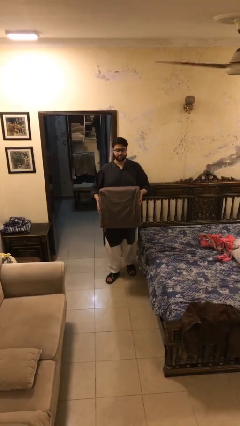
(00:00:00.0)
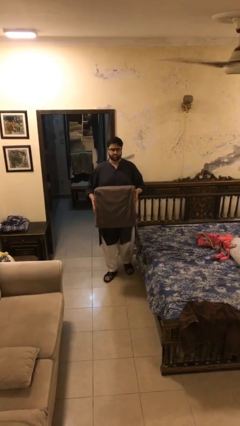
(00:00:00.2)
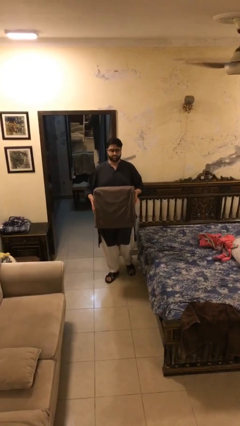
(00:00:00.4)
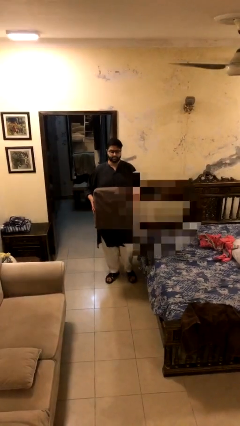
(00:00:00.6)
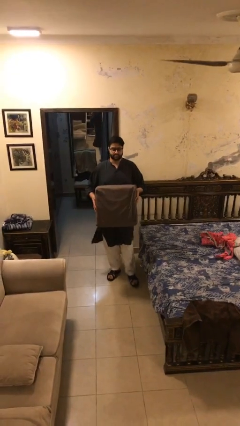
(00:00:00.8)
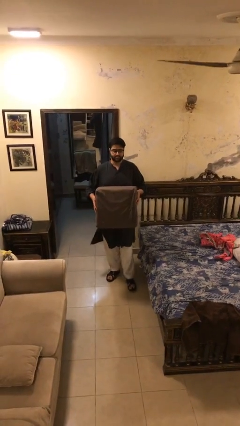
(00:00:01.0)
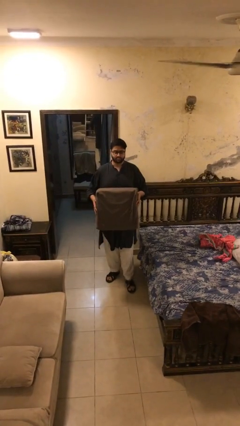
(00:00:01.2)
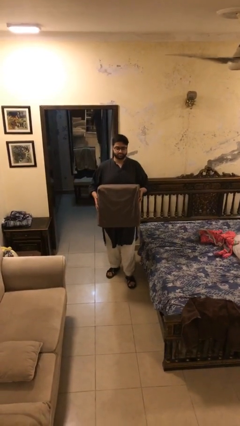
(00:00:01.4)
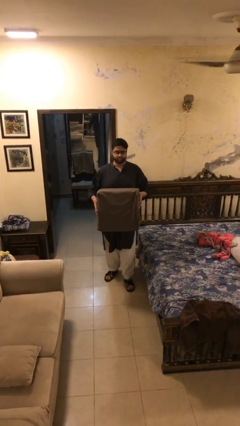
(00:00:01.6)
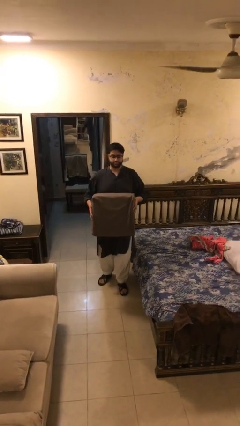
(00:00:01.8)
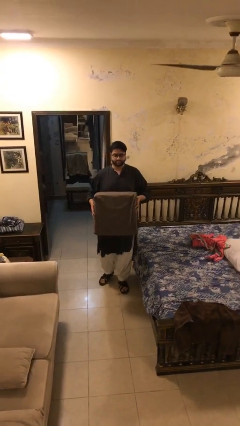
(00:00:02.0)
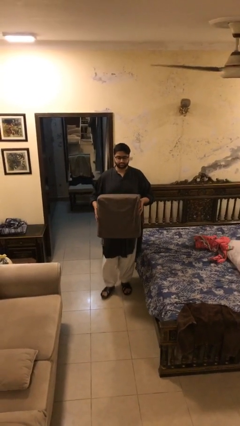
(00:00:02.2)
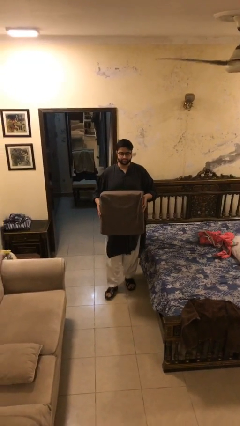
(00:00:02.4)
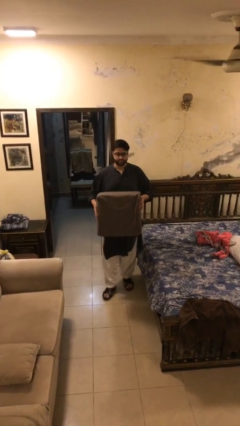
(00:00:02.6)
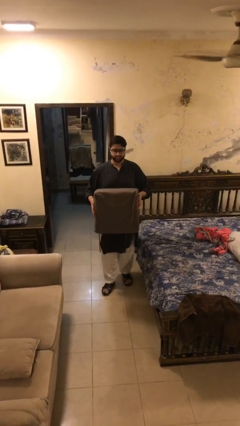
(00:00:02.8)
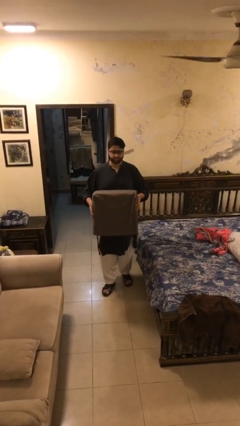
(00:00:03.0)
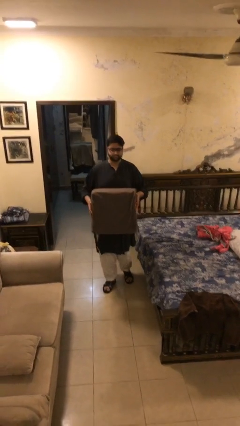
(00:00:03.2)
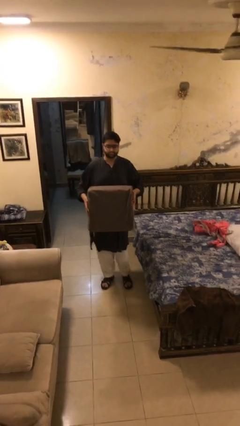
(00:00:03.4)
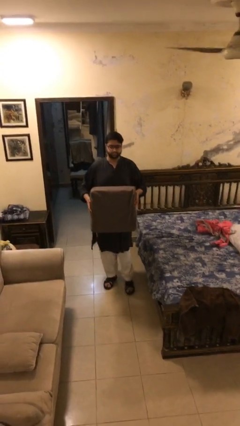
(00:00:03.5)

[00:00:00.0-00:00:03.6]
person carries heavy object

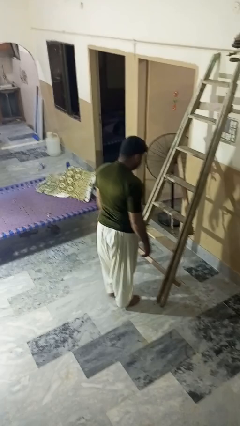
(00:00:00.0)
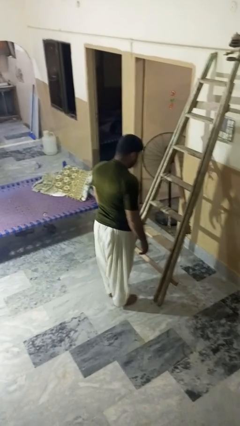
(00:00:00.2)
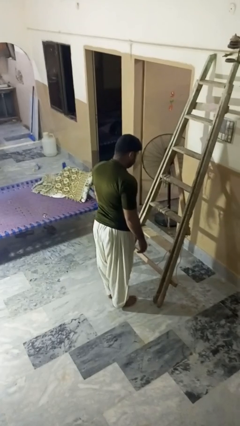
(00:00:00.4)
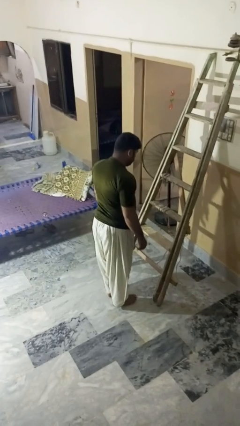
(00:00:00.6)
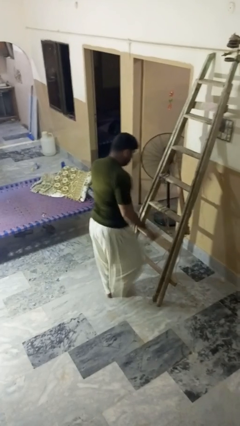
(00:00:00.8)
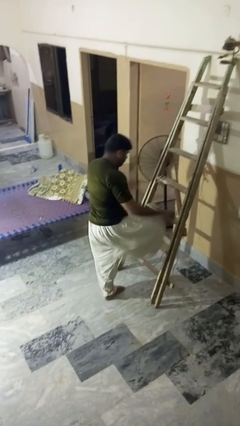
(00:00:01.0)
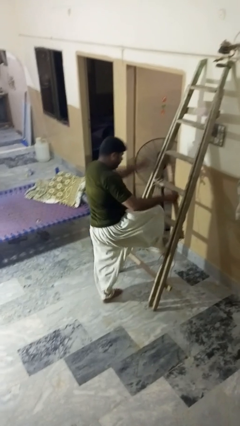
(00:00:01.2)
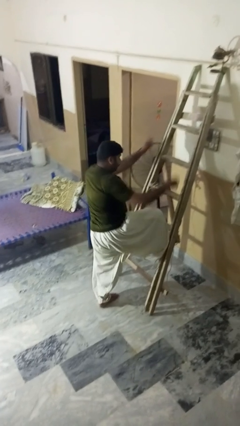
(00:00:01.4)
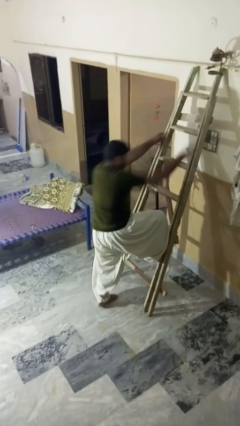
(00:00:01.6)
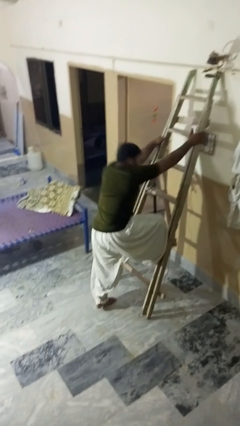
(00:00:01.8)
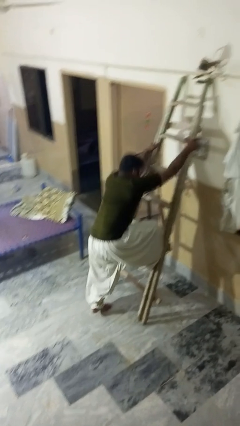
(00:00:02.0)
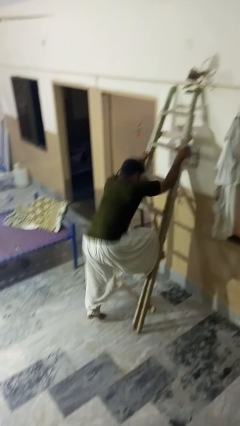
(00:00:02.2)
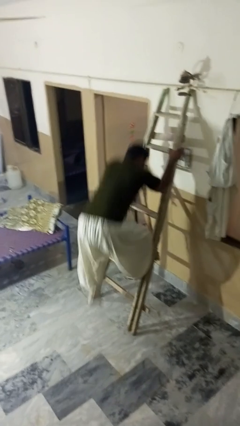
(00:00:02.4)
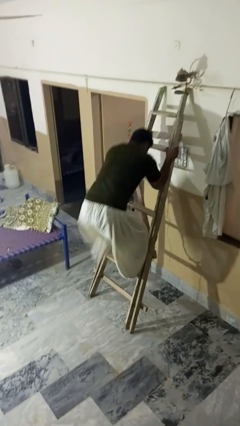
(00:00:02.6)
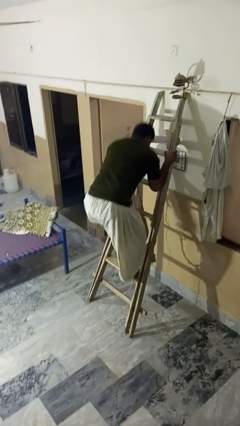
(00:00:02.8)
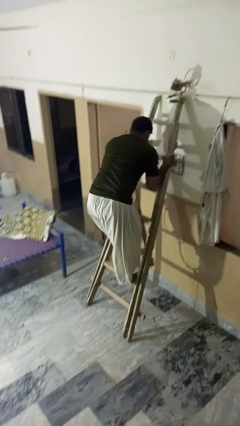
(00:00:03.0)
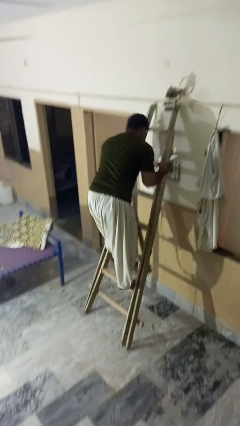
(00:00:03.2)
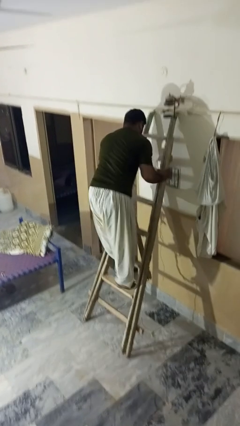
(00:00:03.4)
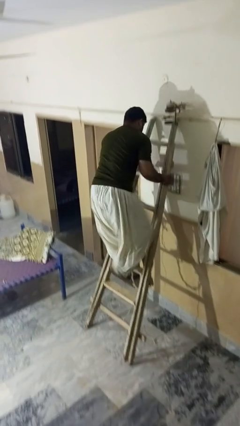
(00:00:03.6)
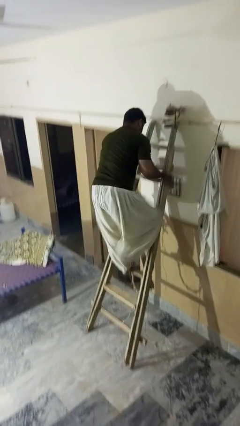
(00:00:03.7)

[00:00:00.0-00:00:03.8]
person climbs up ladder

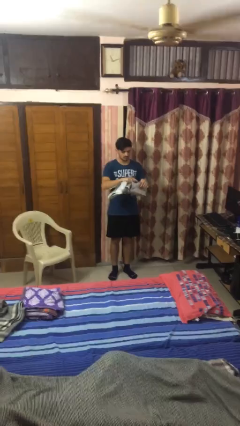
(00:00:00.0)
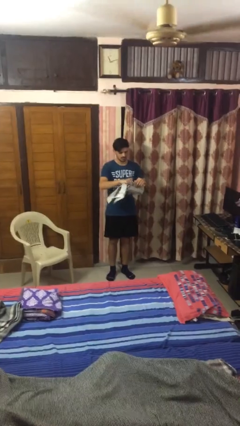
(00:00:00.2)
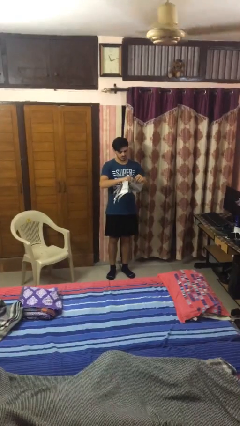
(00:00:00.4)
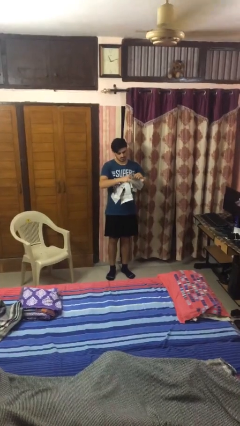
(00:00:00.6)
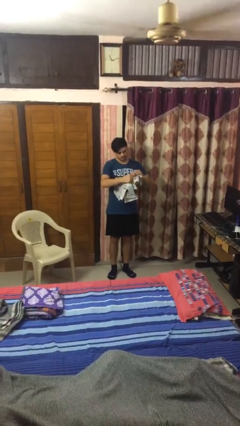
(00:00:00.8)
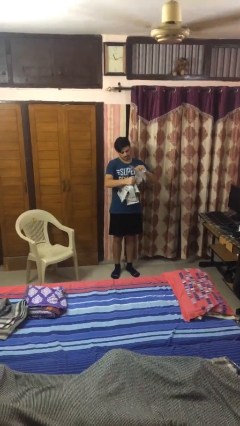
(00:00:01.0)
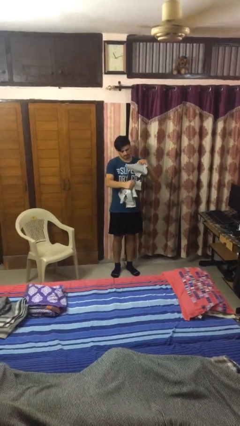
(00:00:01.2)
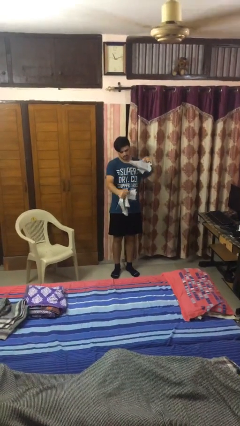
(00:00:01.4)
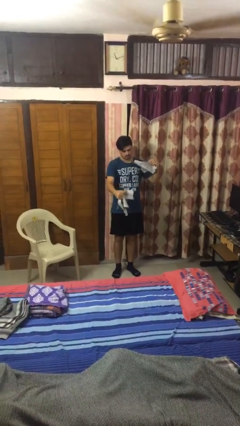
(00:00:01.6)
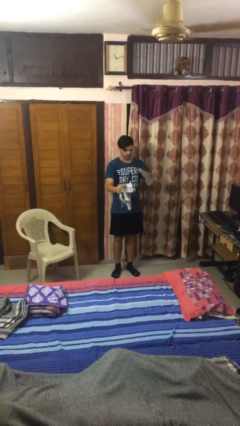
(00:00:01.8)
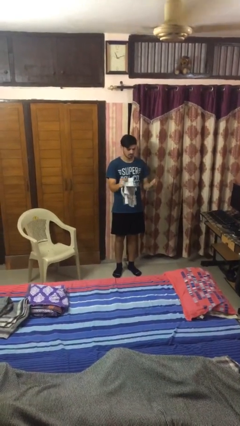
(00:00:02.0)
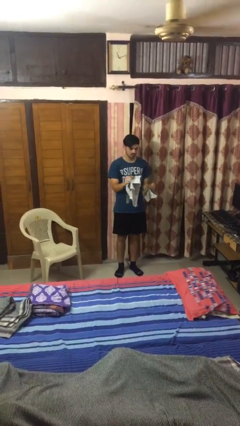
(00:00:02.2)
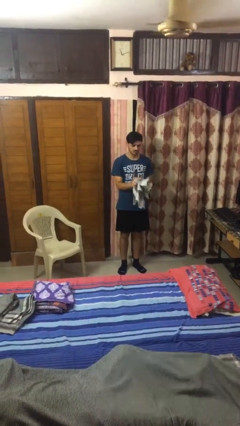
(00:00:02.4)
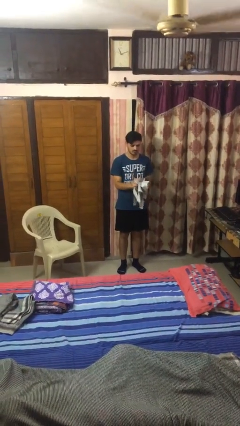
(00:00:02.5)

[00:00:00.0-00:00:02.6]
person tears paper

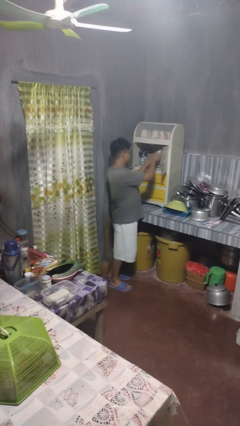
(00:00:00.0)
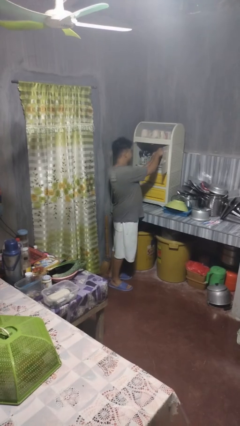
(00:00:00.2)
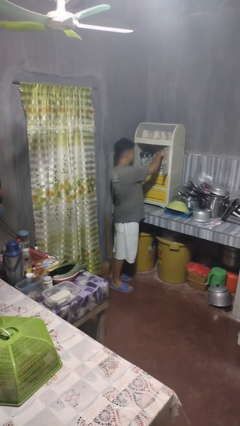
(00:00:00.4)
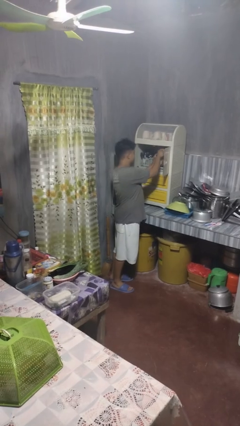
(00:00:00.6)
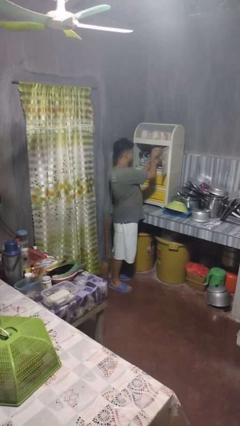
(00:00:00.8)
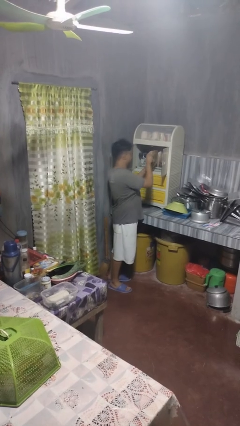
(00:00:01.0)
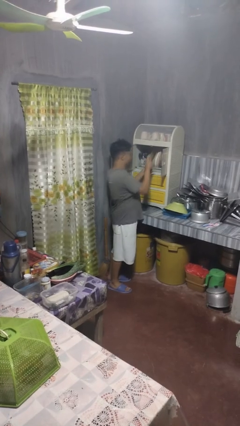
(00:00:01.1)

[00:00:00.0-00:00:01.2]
person takes object from cabinet

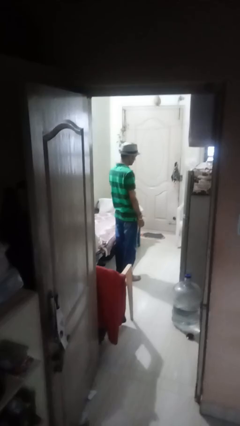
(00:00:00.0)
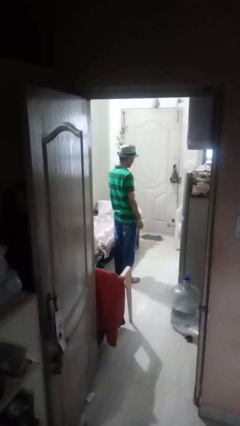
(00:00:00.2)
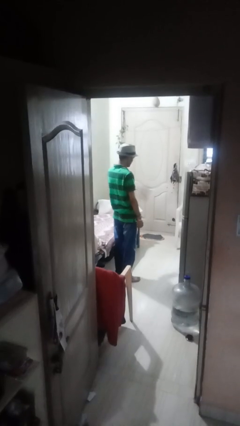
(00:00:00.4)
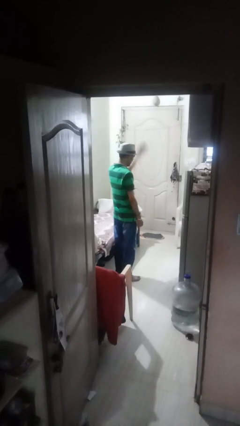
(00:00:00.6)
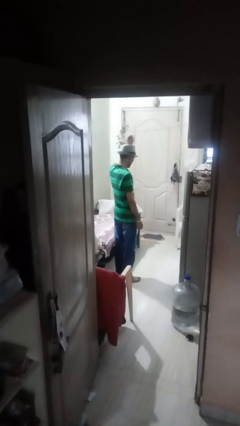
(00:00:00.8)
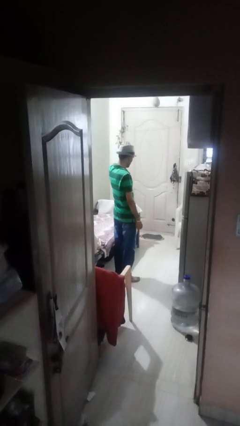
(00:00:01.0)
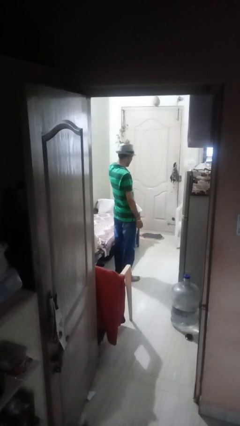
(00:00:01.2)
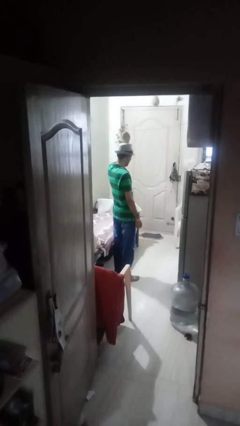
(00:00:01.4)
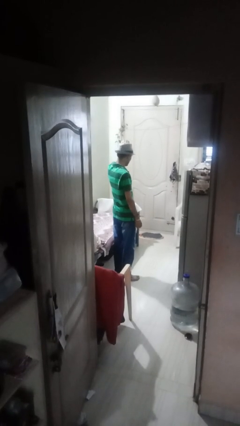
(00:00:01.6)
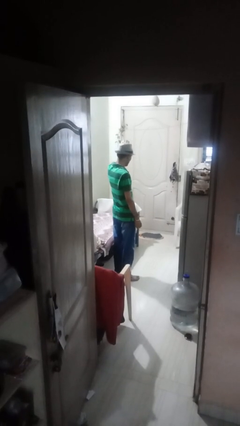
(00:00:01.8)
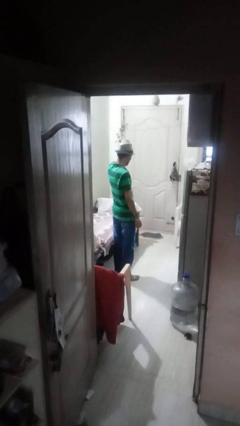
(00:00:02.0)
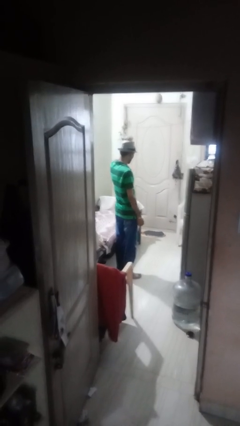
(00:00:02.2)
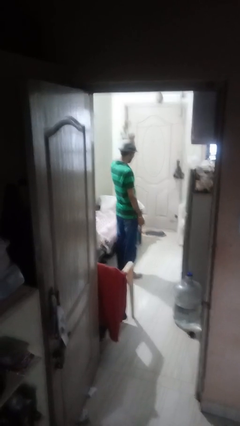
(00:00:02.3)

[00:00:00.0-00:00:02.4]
person pats head

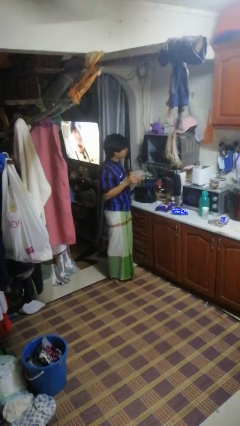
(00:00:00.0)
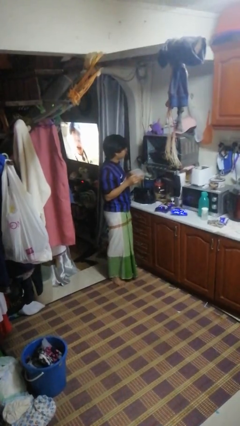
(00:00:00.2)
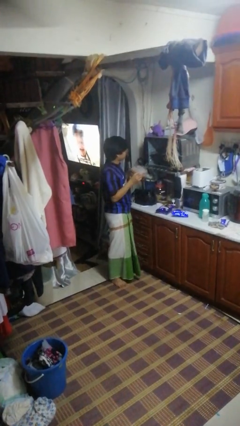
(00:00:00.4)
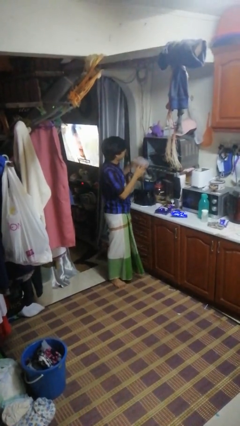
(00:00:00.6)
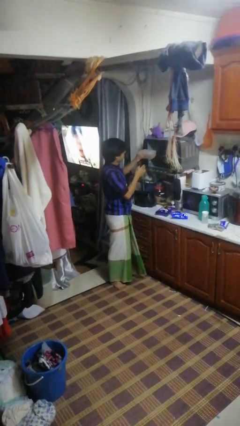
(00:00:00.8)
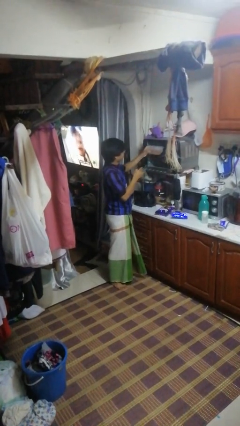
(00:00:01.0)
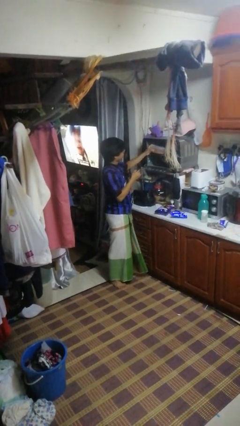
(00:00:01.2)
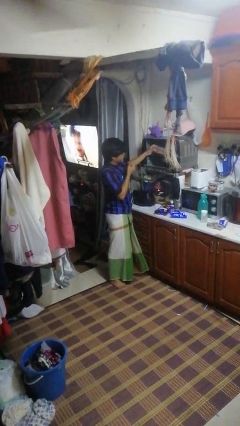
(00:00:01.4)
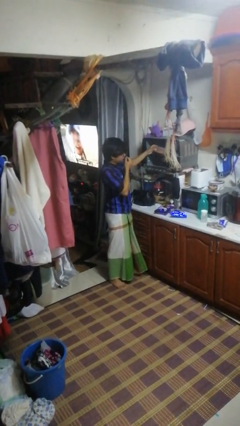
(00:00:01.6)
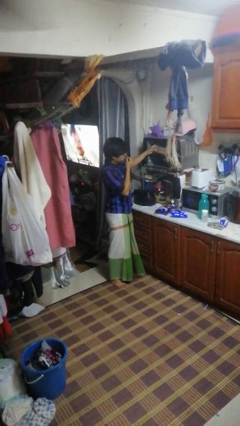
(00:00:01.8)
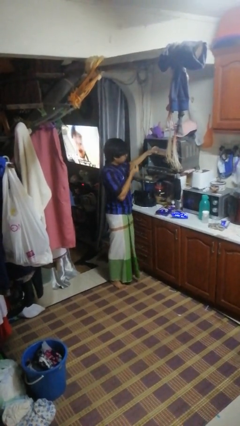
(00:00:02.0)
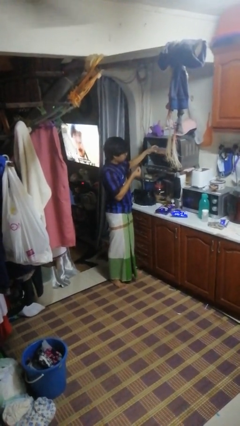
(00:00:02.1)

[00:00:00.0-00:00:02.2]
person puts object into oven

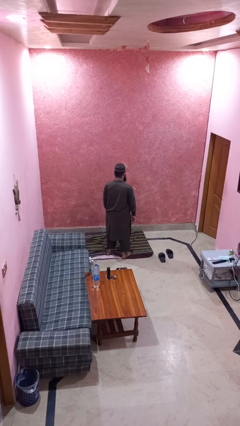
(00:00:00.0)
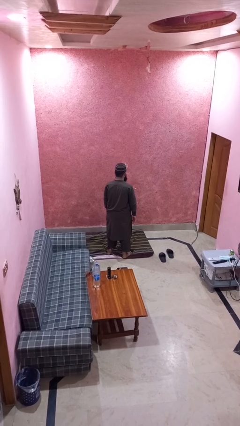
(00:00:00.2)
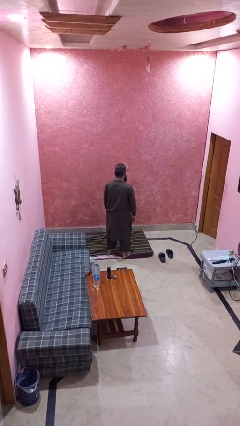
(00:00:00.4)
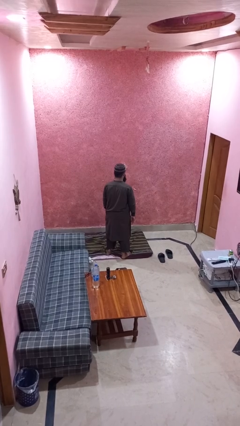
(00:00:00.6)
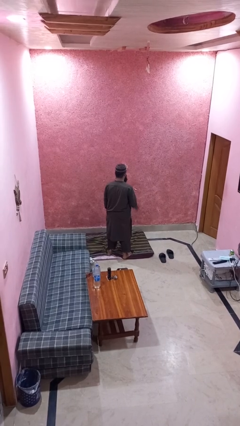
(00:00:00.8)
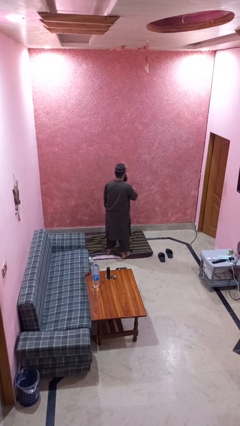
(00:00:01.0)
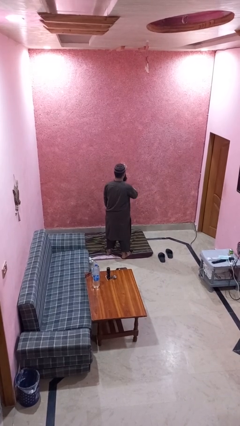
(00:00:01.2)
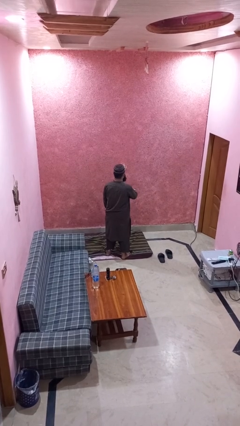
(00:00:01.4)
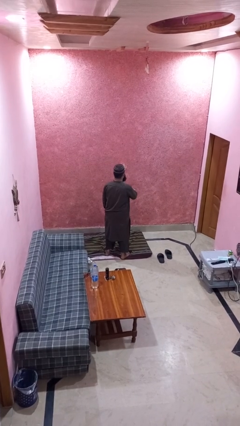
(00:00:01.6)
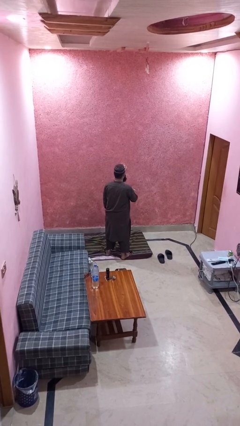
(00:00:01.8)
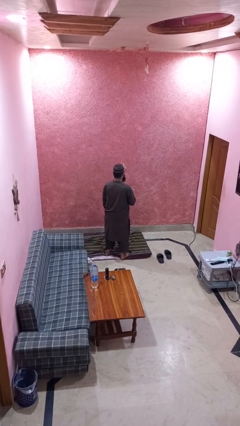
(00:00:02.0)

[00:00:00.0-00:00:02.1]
person drums on chest
